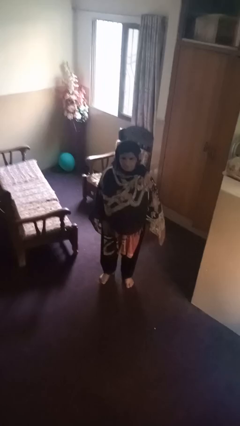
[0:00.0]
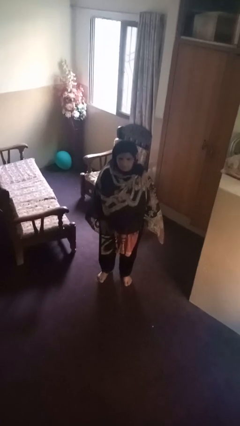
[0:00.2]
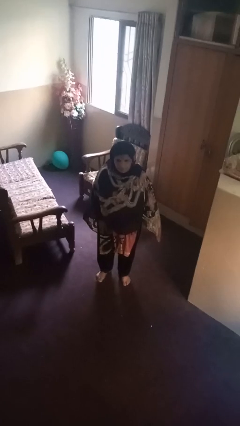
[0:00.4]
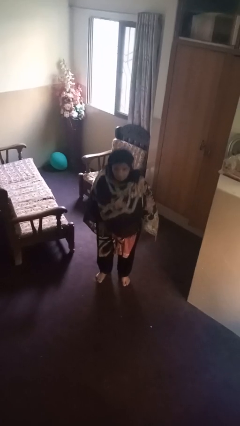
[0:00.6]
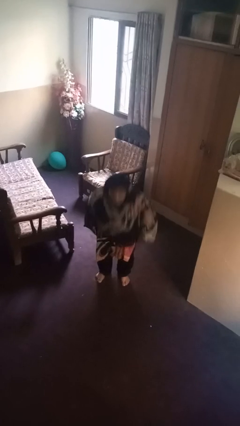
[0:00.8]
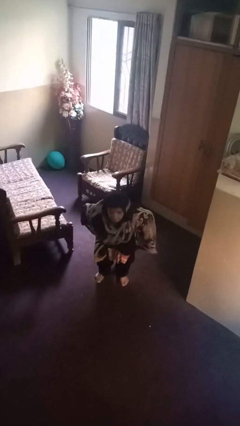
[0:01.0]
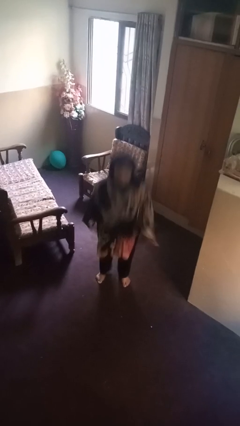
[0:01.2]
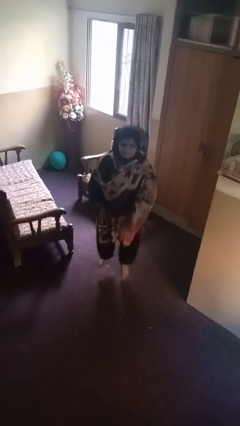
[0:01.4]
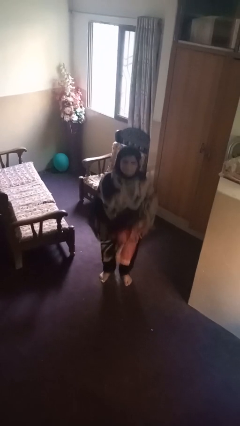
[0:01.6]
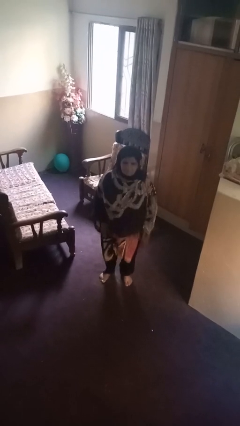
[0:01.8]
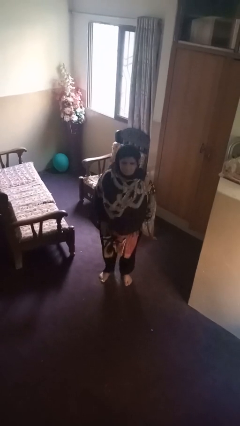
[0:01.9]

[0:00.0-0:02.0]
person jumps

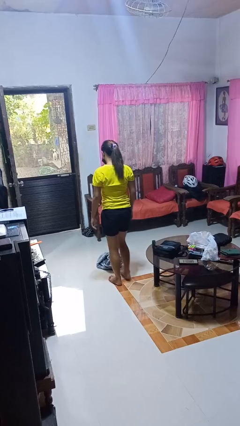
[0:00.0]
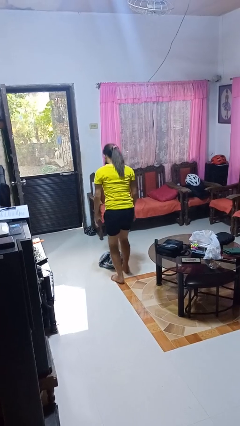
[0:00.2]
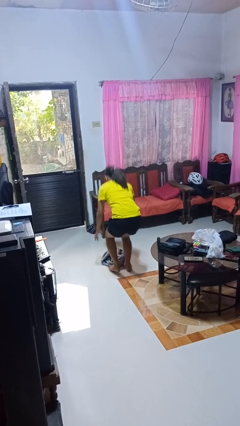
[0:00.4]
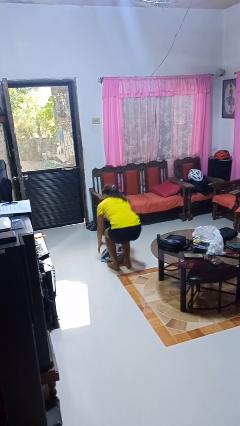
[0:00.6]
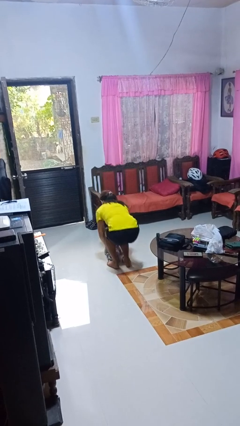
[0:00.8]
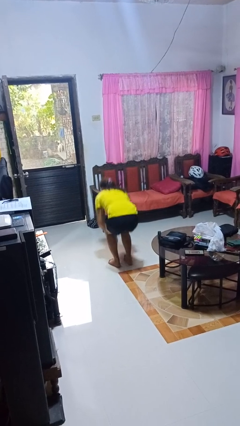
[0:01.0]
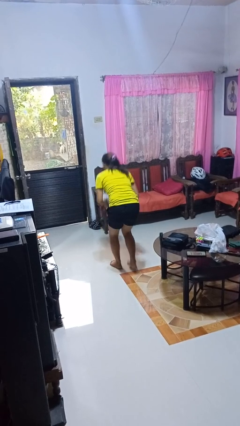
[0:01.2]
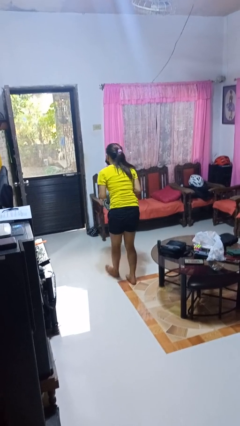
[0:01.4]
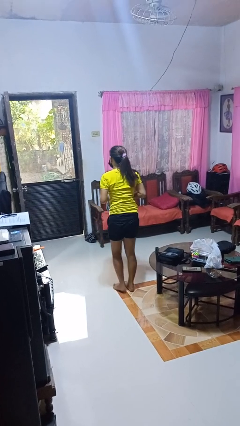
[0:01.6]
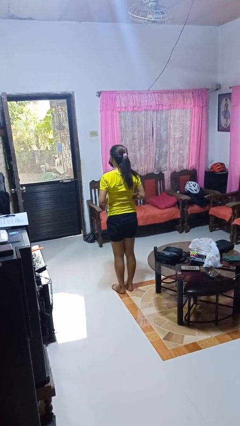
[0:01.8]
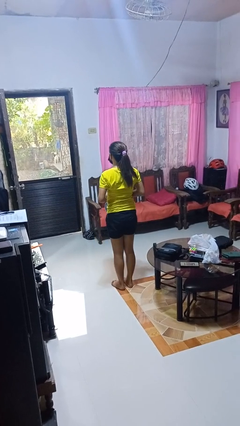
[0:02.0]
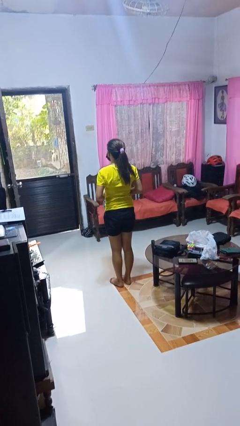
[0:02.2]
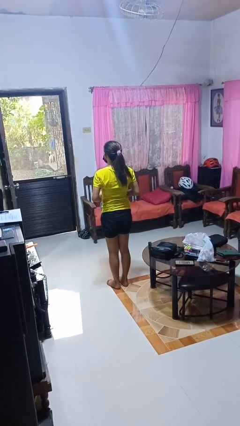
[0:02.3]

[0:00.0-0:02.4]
person picks up object from floor

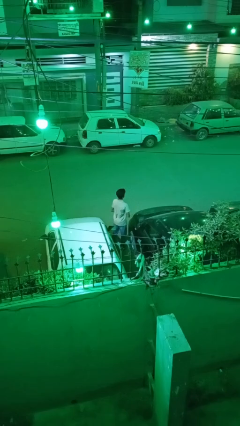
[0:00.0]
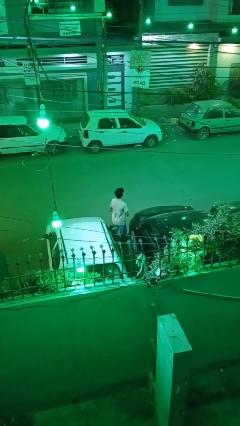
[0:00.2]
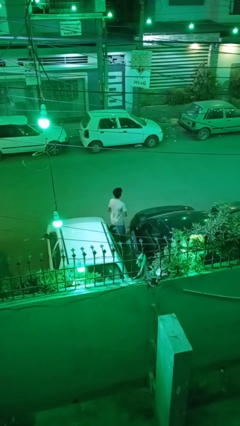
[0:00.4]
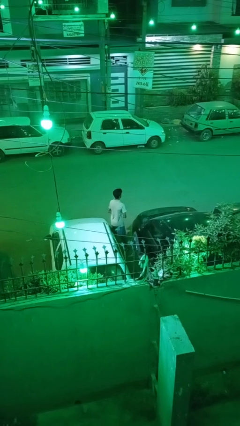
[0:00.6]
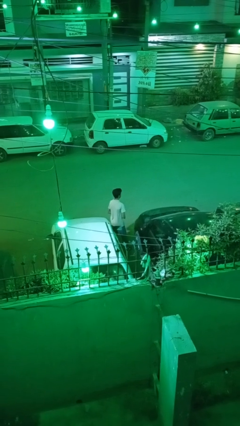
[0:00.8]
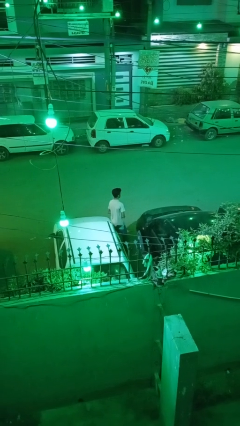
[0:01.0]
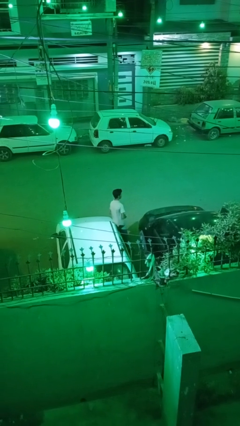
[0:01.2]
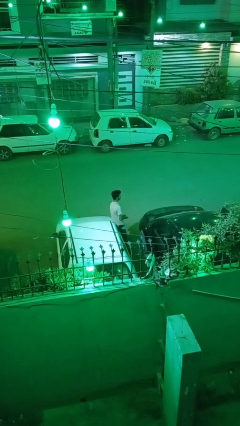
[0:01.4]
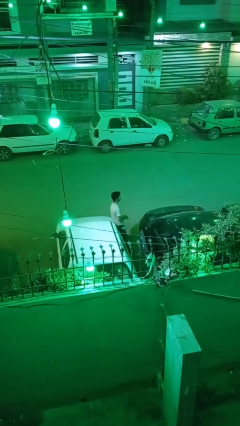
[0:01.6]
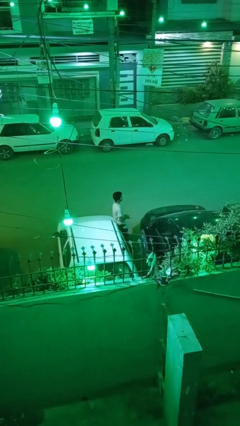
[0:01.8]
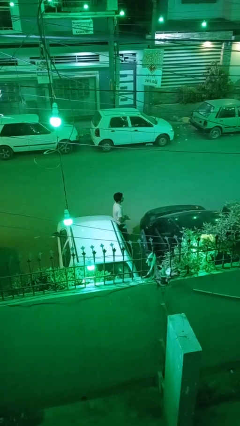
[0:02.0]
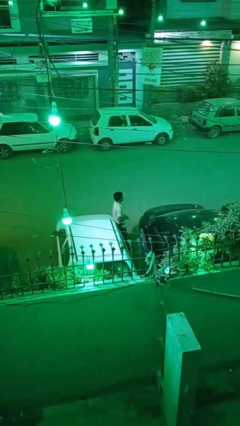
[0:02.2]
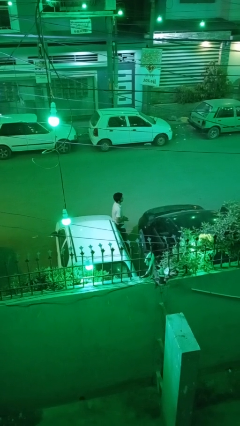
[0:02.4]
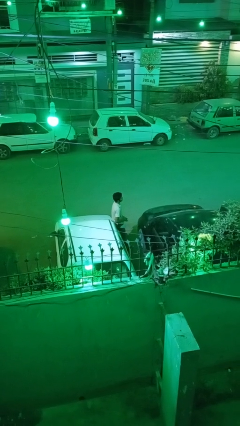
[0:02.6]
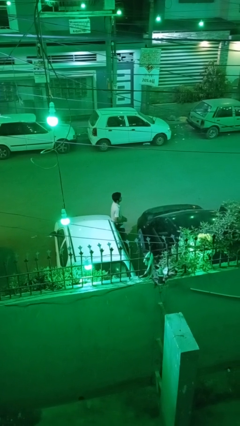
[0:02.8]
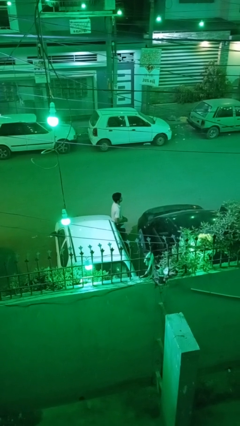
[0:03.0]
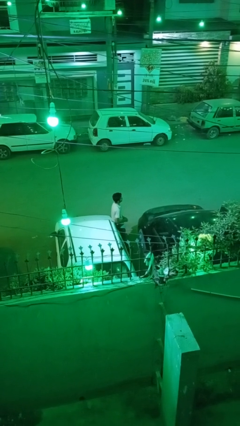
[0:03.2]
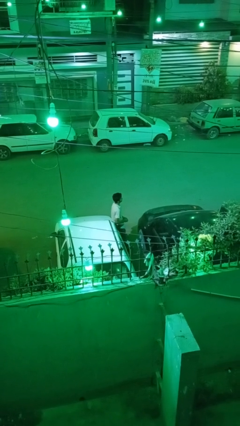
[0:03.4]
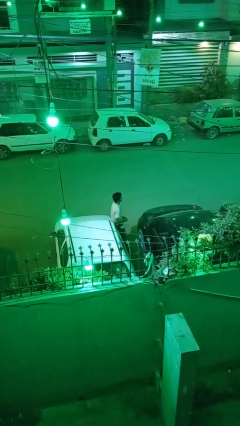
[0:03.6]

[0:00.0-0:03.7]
person leans against car

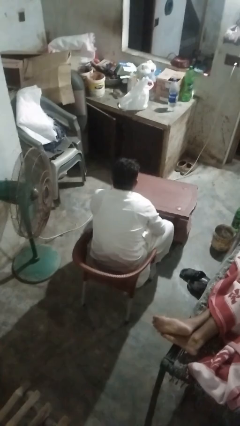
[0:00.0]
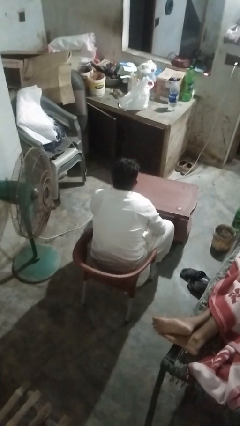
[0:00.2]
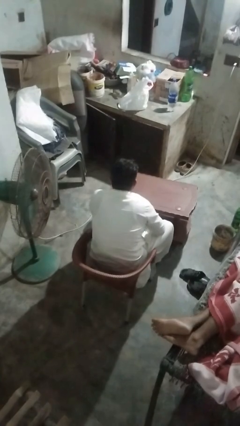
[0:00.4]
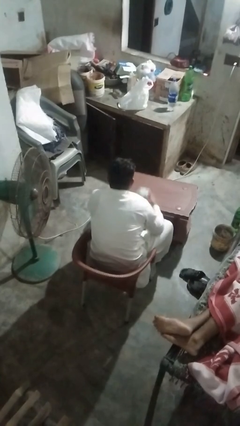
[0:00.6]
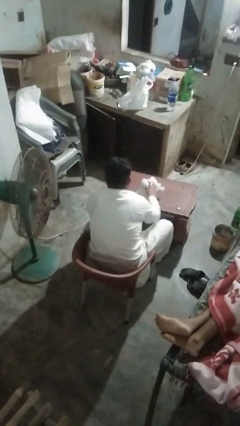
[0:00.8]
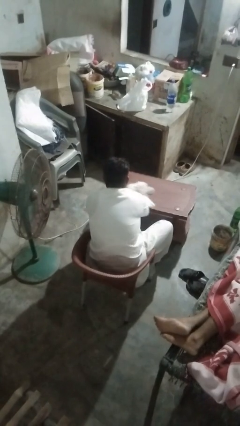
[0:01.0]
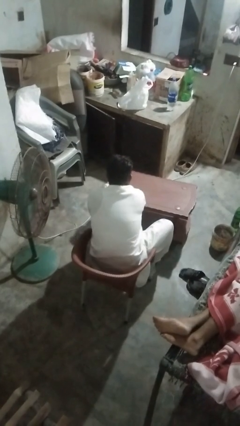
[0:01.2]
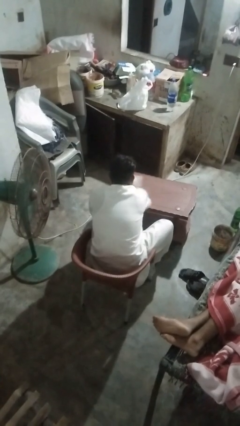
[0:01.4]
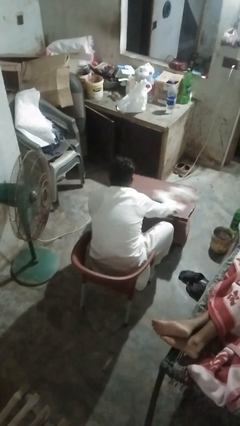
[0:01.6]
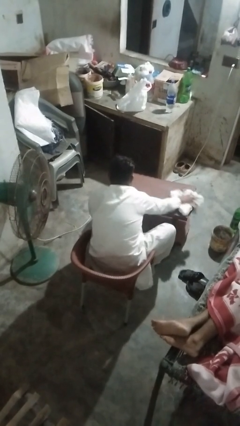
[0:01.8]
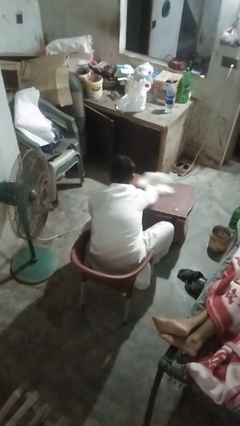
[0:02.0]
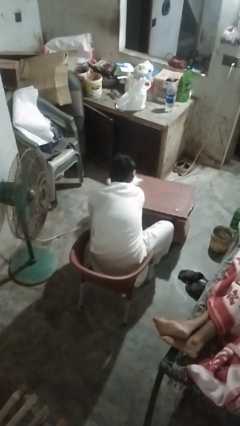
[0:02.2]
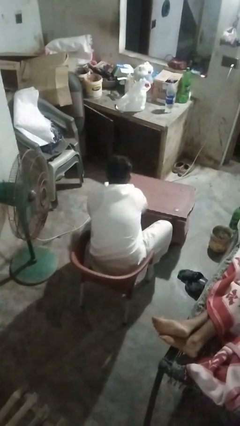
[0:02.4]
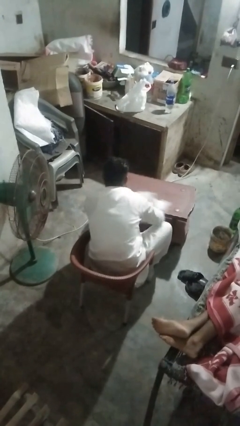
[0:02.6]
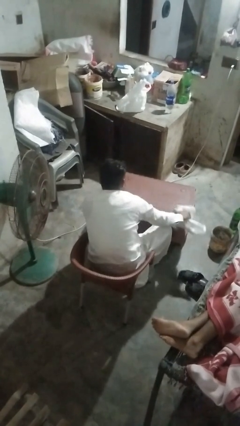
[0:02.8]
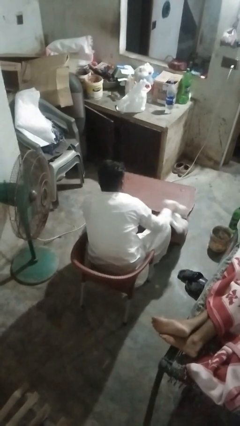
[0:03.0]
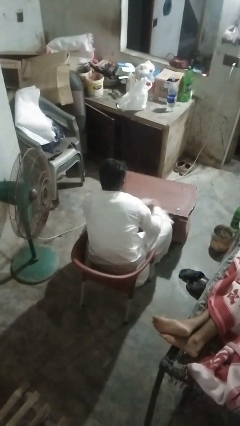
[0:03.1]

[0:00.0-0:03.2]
person cleans table with rag

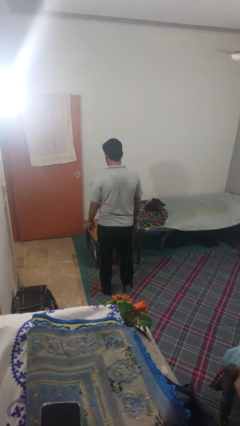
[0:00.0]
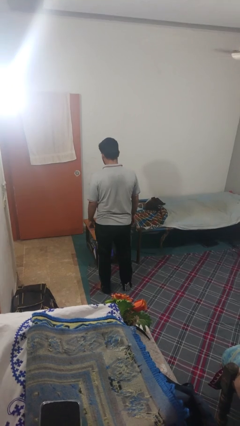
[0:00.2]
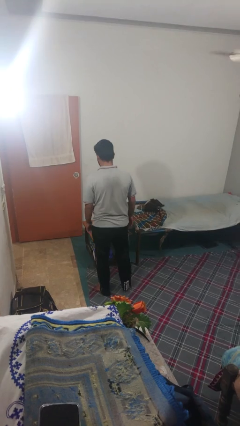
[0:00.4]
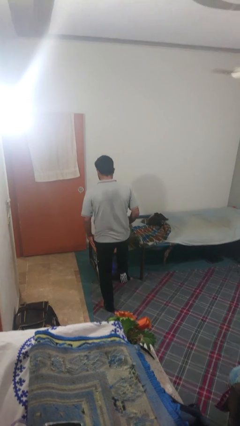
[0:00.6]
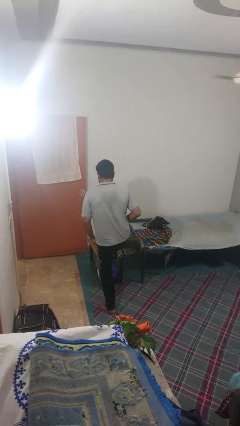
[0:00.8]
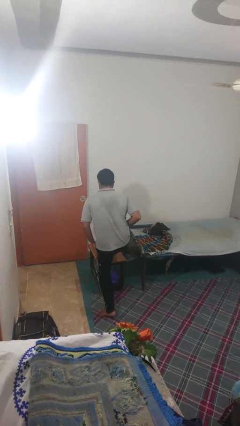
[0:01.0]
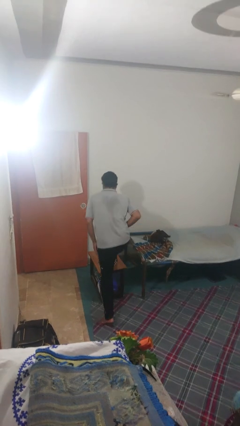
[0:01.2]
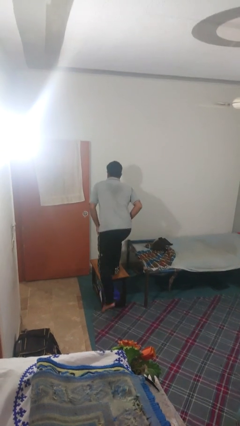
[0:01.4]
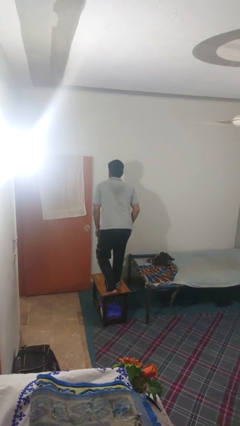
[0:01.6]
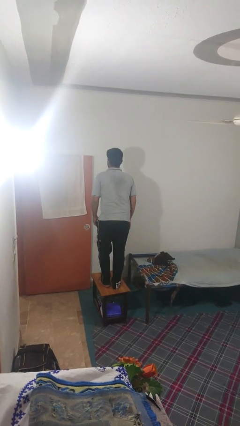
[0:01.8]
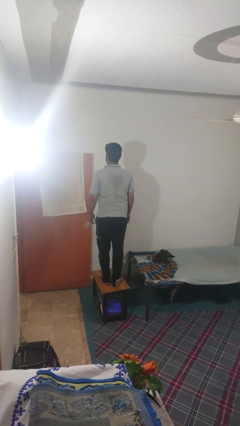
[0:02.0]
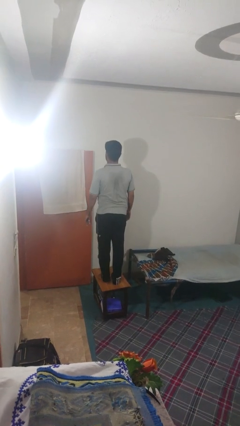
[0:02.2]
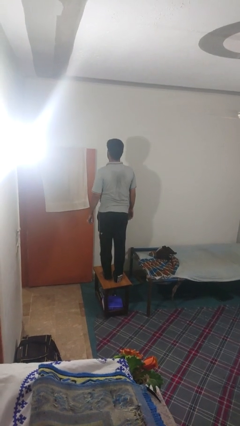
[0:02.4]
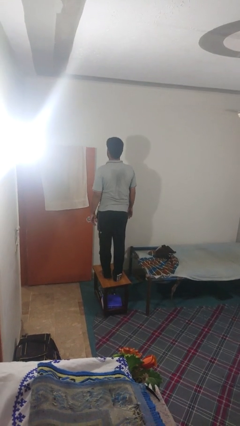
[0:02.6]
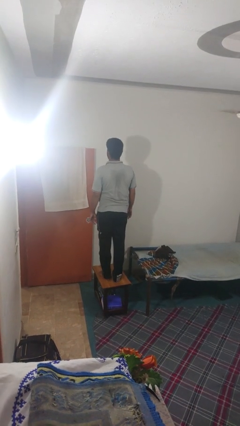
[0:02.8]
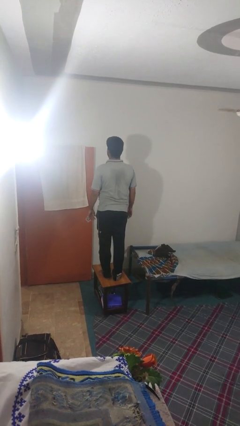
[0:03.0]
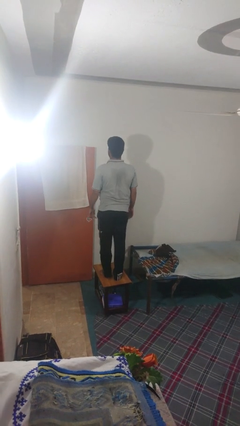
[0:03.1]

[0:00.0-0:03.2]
person climbs on table

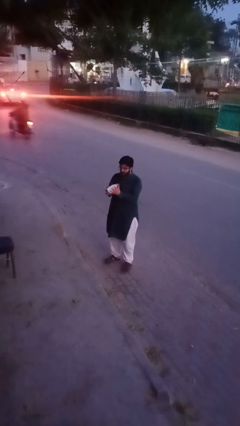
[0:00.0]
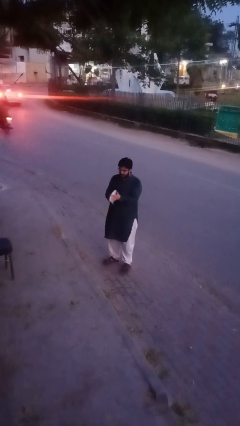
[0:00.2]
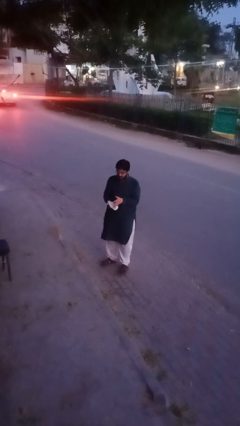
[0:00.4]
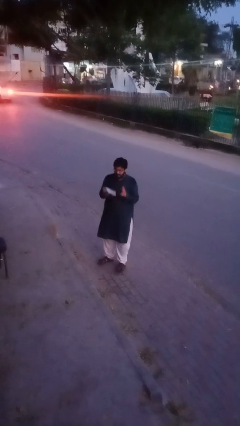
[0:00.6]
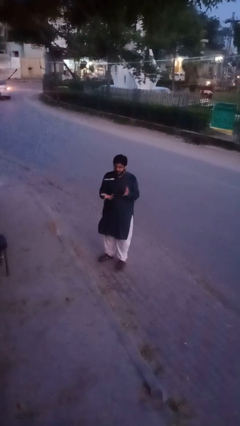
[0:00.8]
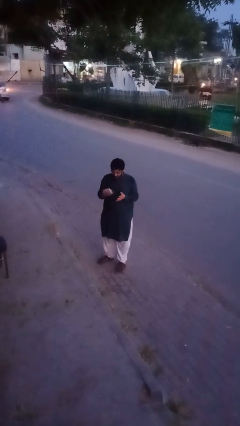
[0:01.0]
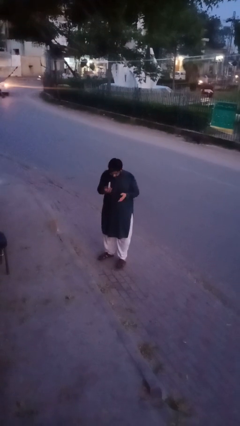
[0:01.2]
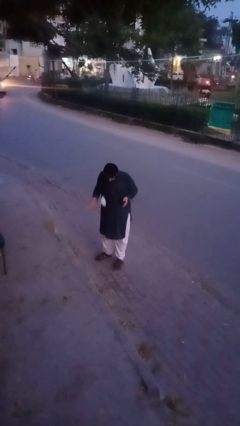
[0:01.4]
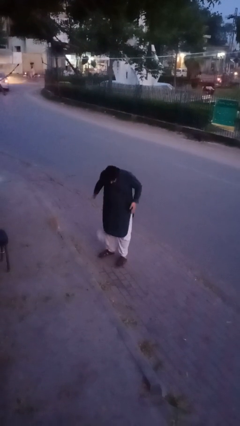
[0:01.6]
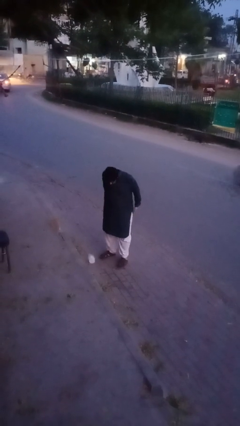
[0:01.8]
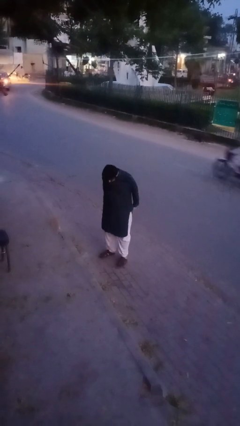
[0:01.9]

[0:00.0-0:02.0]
person drops object

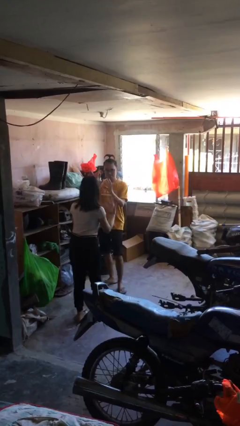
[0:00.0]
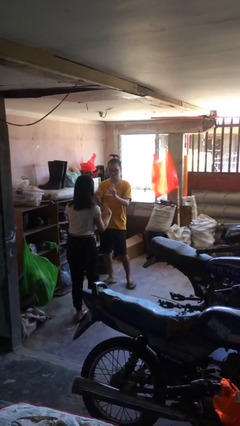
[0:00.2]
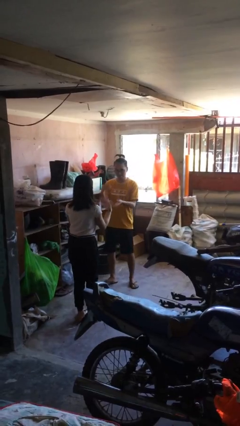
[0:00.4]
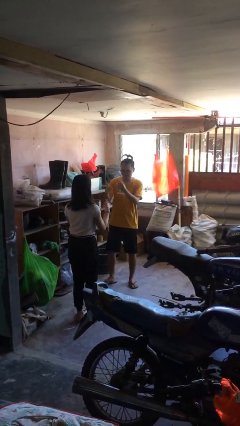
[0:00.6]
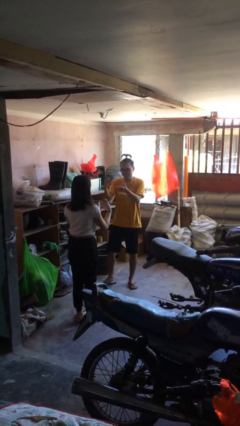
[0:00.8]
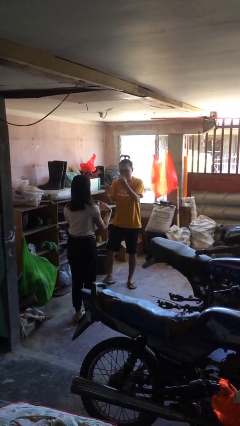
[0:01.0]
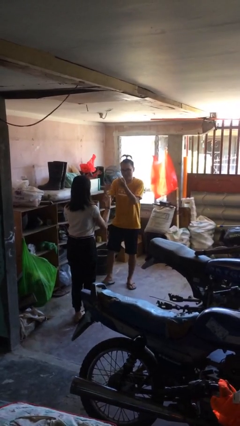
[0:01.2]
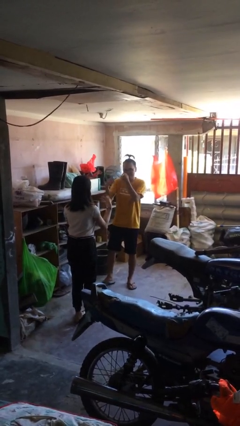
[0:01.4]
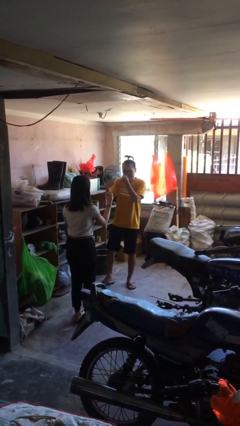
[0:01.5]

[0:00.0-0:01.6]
person talks to person
